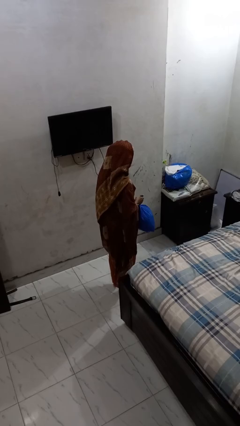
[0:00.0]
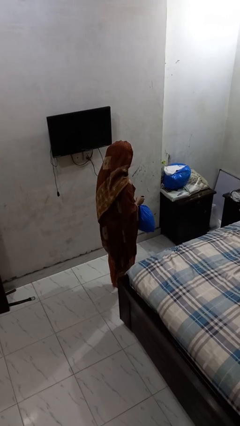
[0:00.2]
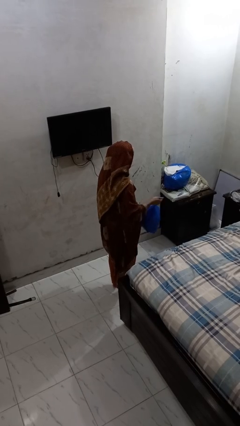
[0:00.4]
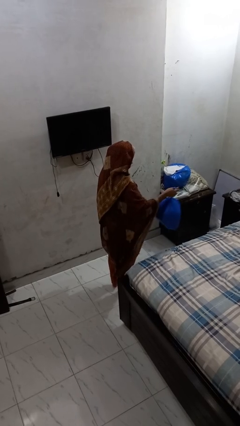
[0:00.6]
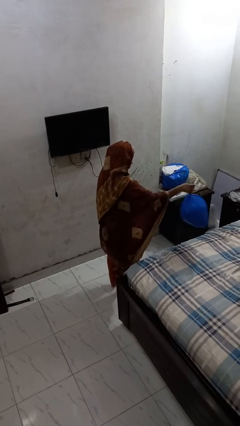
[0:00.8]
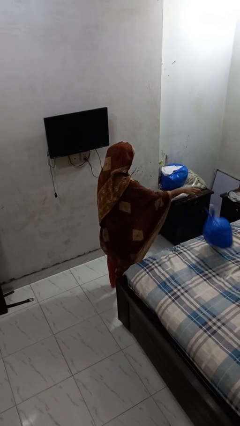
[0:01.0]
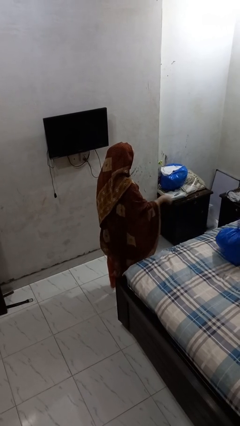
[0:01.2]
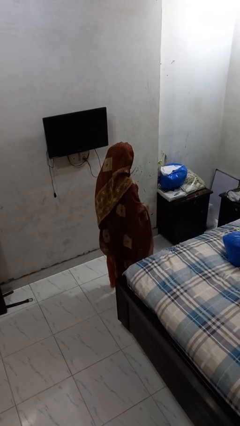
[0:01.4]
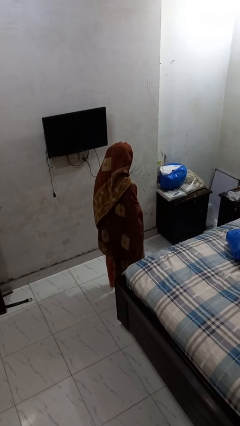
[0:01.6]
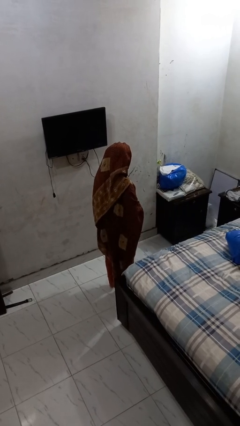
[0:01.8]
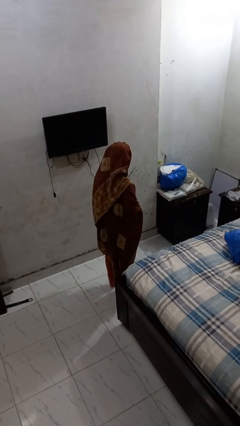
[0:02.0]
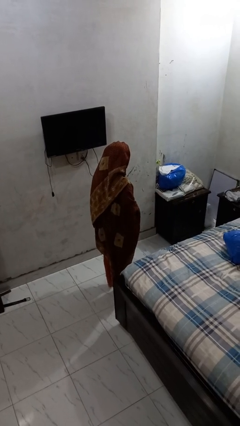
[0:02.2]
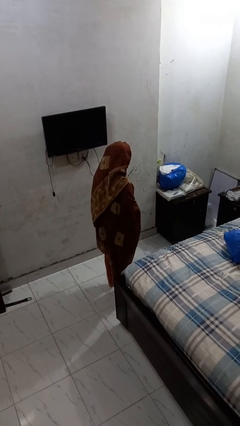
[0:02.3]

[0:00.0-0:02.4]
person throws object on bed

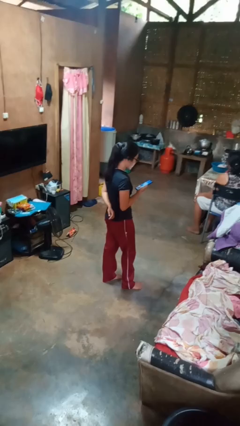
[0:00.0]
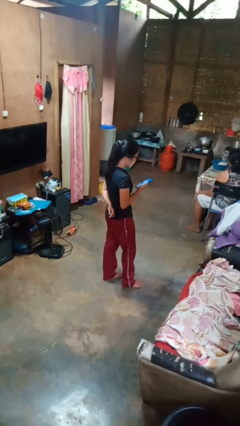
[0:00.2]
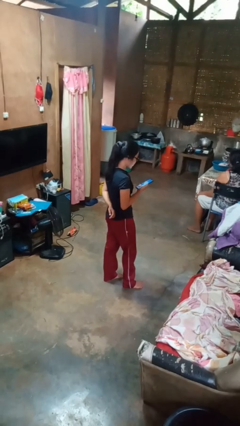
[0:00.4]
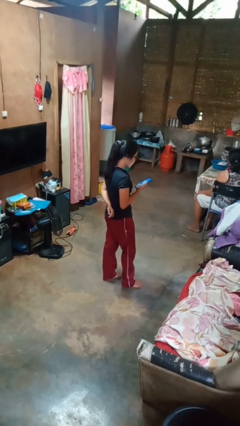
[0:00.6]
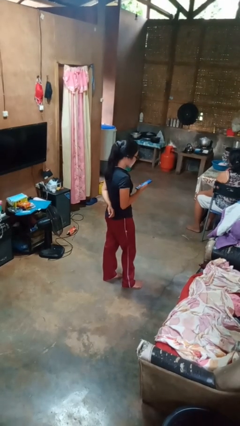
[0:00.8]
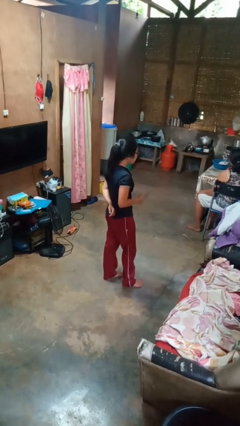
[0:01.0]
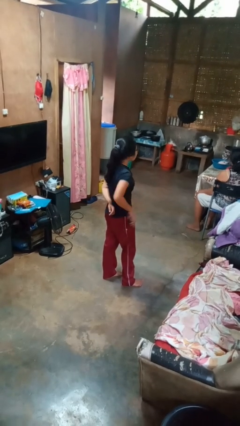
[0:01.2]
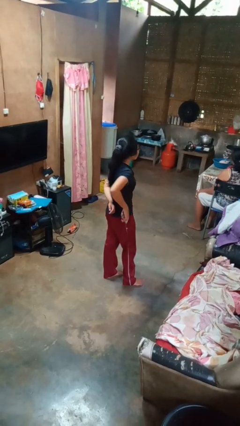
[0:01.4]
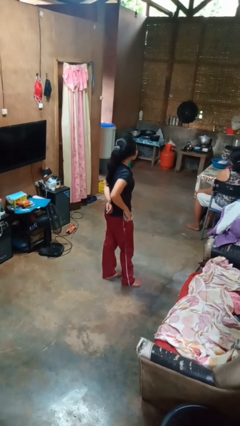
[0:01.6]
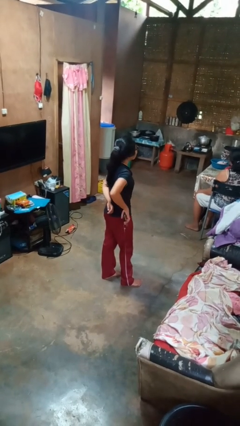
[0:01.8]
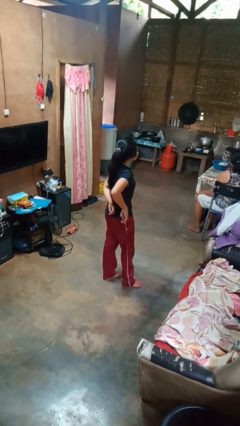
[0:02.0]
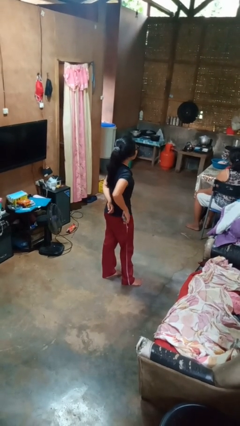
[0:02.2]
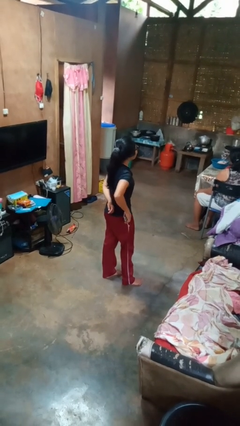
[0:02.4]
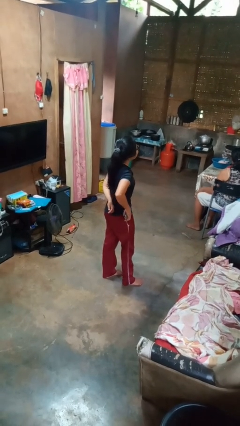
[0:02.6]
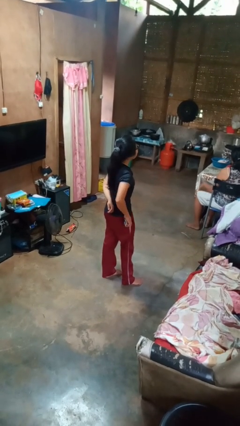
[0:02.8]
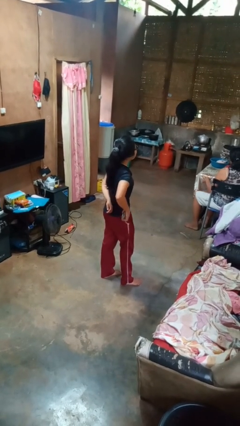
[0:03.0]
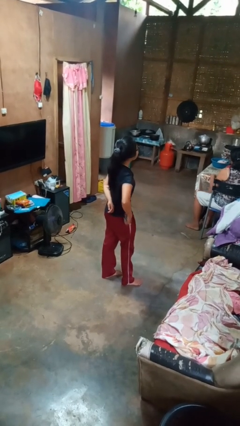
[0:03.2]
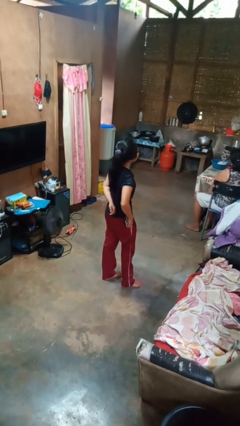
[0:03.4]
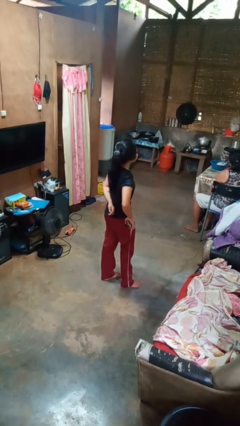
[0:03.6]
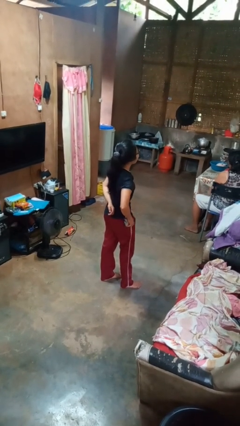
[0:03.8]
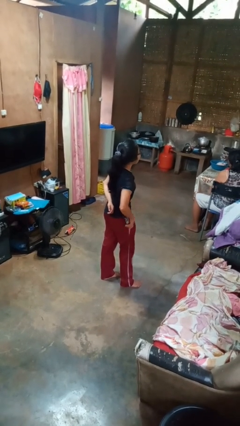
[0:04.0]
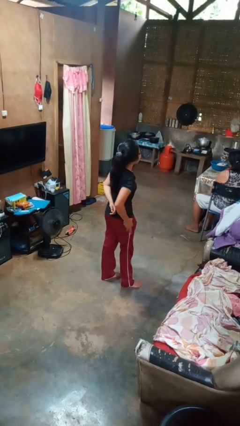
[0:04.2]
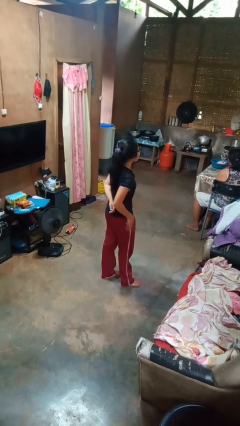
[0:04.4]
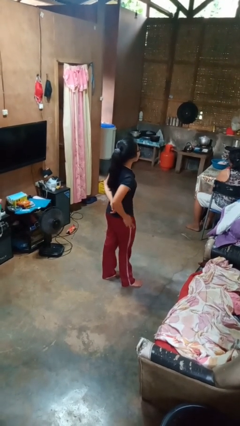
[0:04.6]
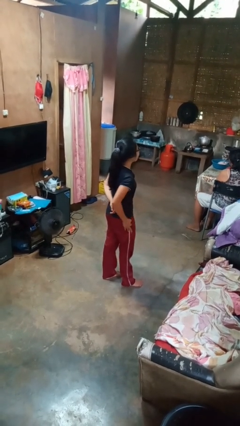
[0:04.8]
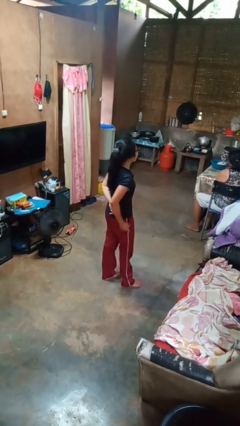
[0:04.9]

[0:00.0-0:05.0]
person puts phone into pocket

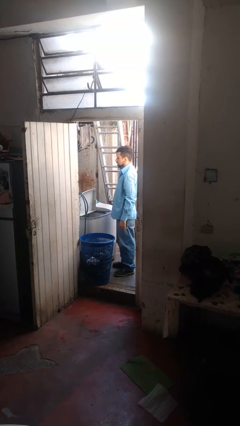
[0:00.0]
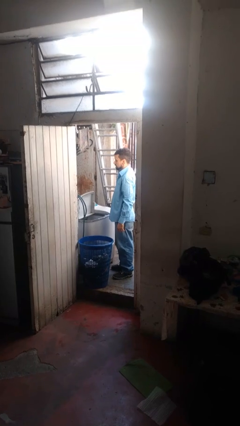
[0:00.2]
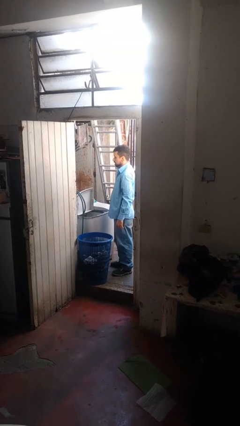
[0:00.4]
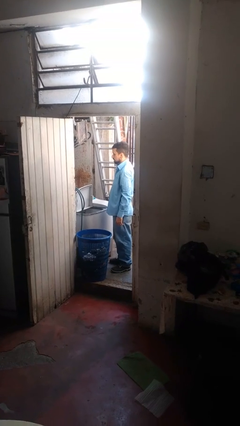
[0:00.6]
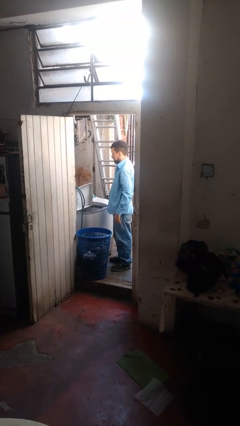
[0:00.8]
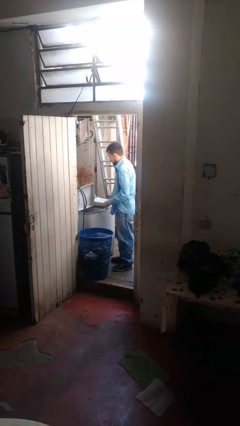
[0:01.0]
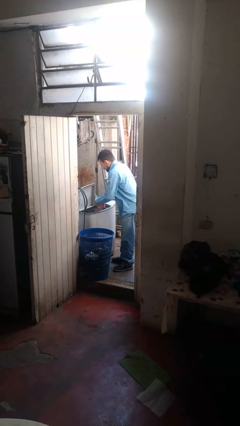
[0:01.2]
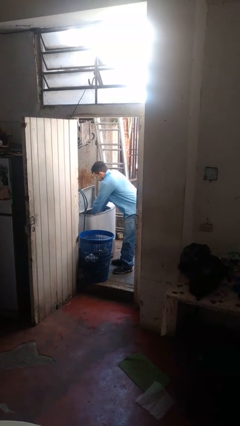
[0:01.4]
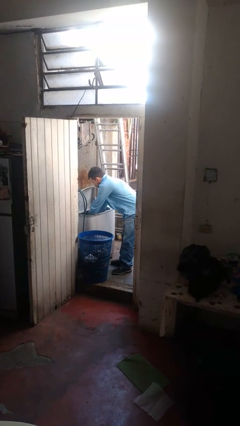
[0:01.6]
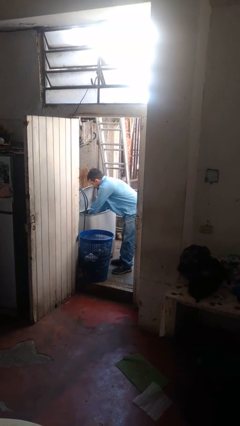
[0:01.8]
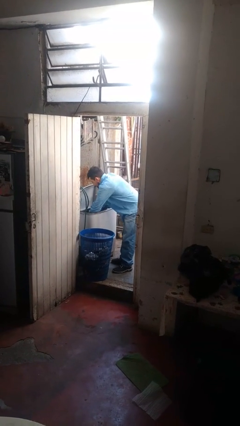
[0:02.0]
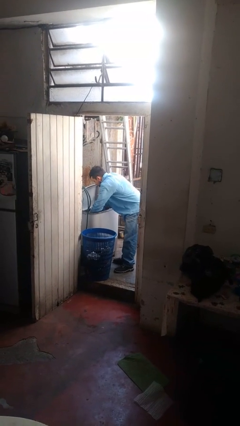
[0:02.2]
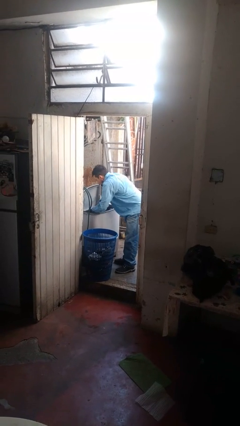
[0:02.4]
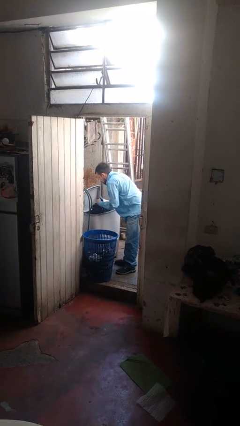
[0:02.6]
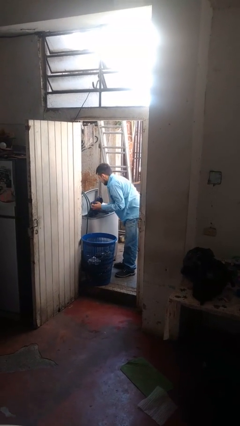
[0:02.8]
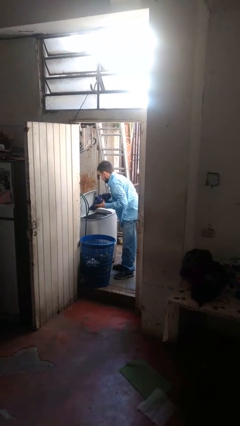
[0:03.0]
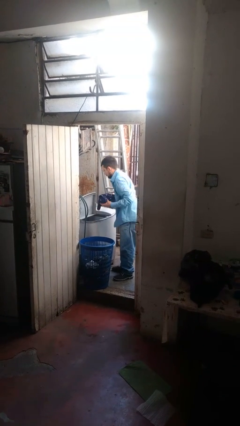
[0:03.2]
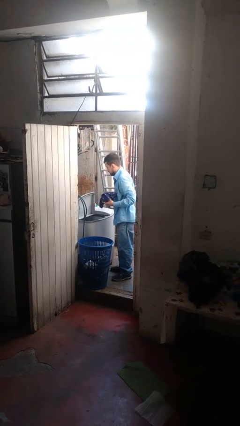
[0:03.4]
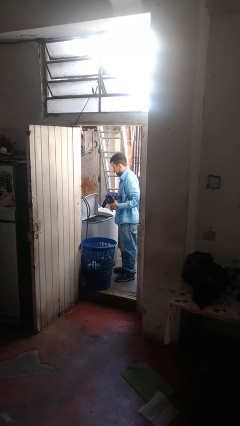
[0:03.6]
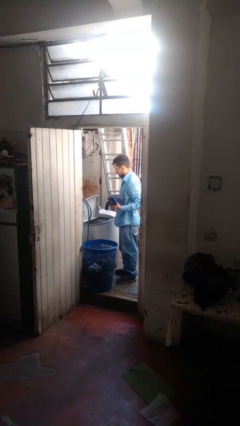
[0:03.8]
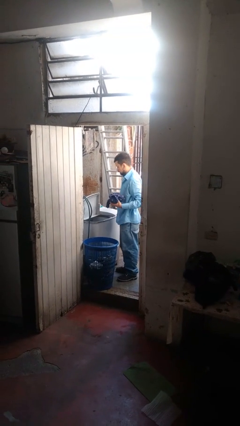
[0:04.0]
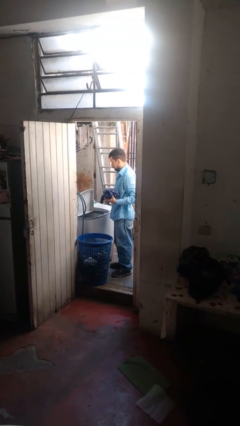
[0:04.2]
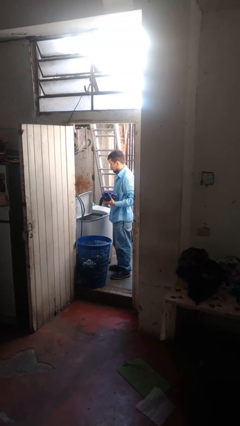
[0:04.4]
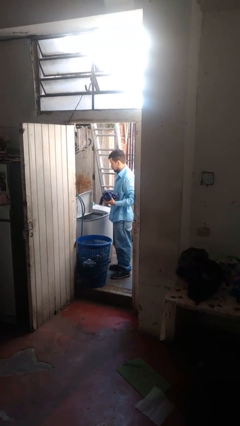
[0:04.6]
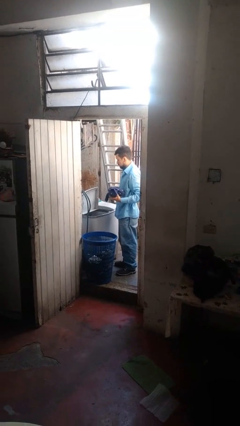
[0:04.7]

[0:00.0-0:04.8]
person unloads clotheswasher

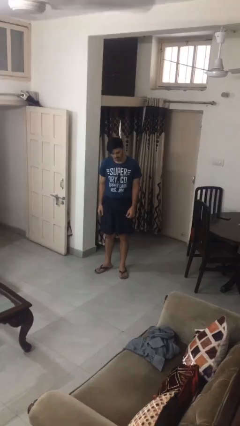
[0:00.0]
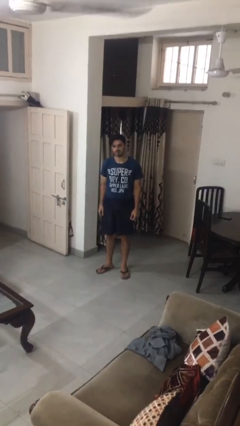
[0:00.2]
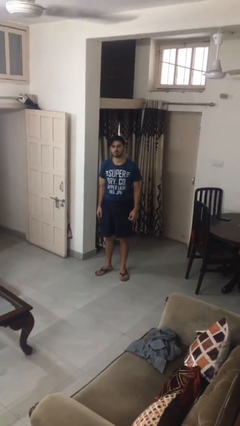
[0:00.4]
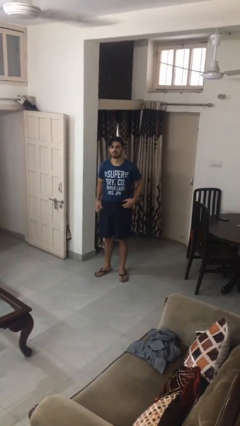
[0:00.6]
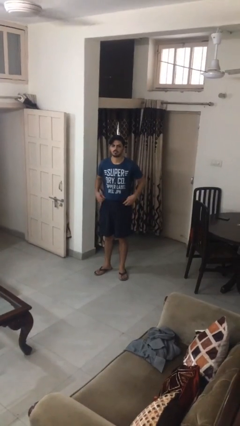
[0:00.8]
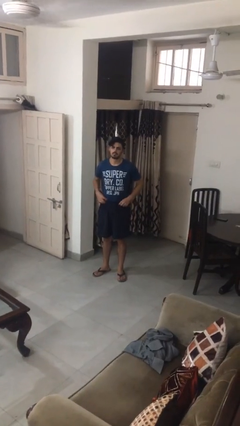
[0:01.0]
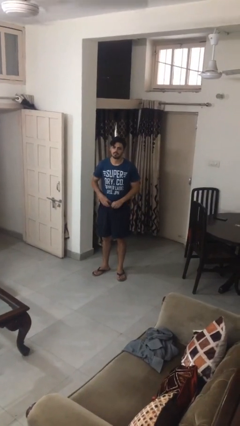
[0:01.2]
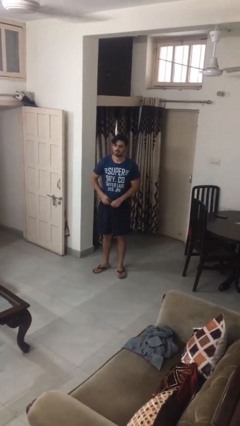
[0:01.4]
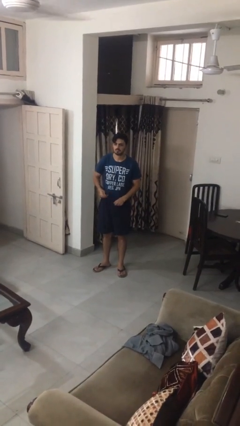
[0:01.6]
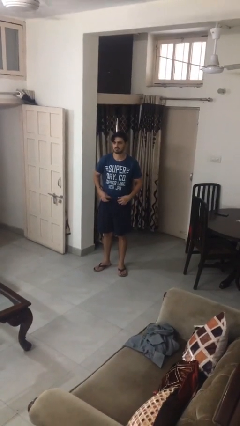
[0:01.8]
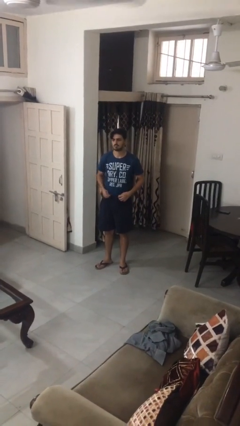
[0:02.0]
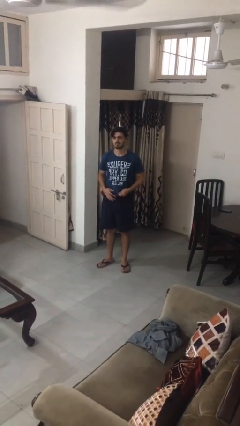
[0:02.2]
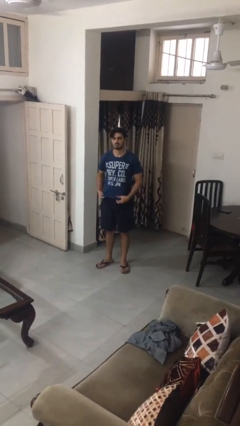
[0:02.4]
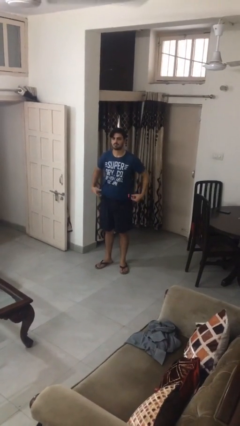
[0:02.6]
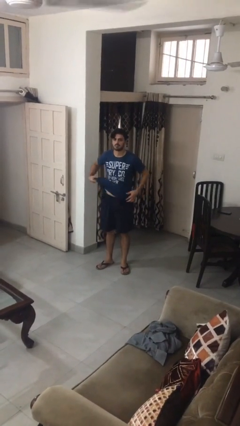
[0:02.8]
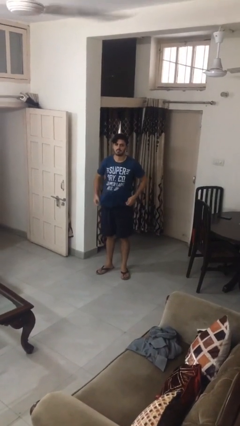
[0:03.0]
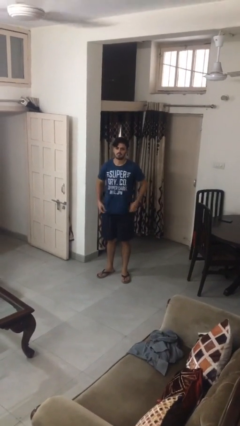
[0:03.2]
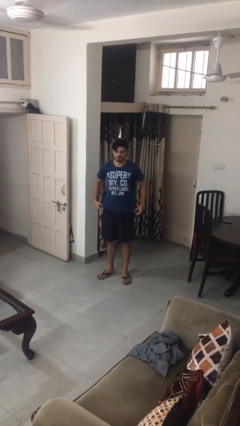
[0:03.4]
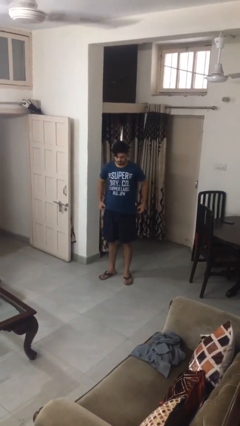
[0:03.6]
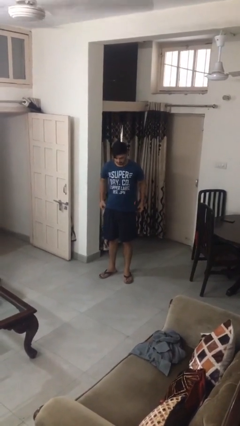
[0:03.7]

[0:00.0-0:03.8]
person untucks shirt

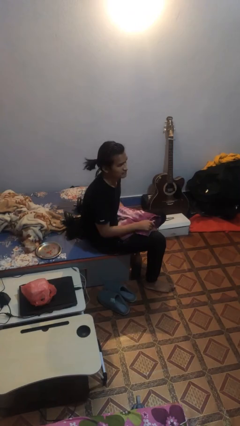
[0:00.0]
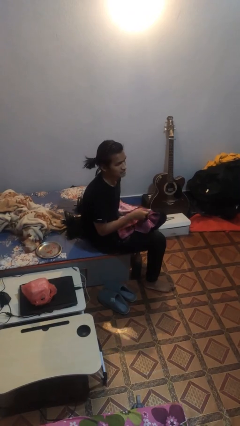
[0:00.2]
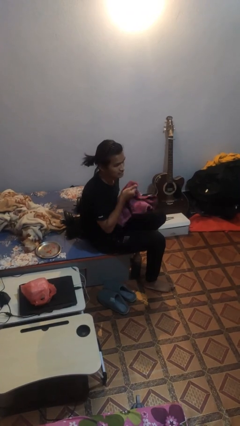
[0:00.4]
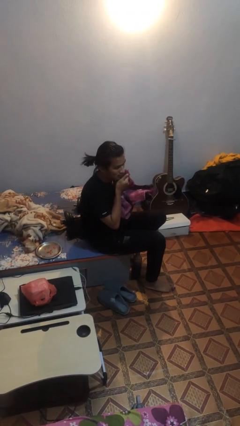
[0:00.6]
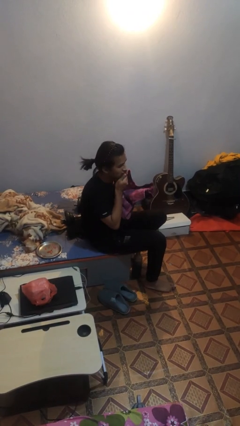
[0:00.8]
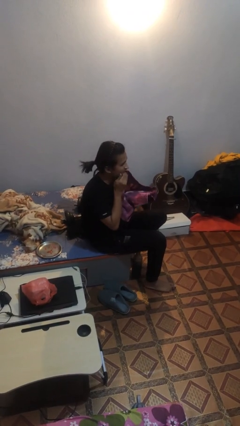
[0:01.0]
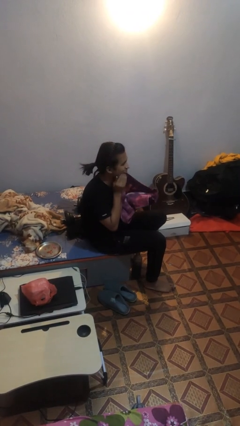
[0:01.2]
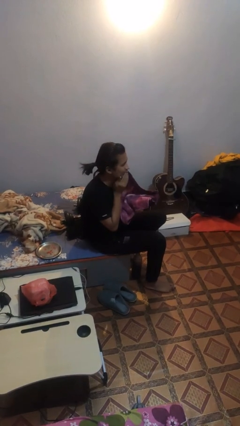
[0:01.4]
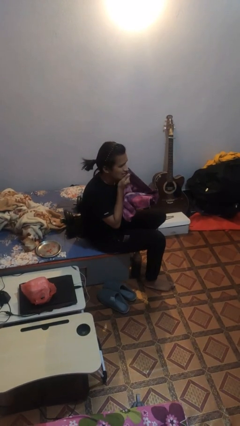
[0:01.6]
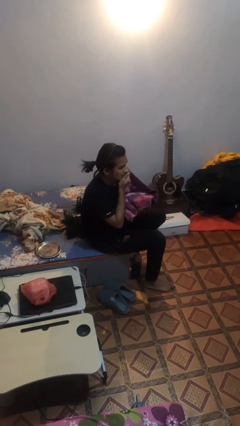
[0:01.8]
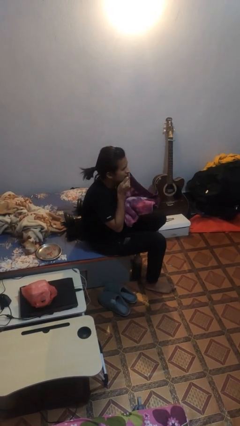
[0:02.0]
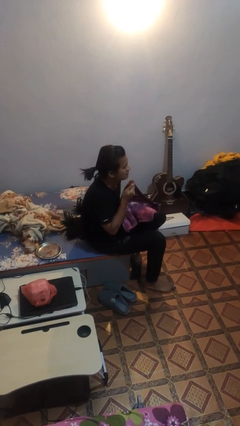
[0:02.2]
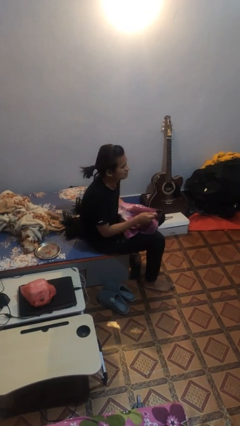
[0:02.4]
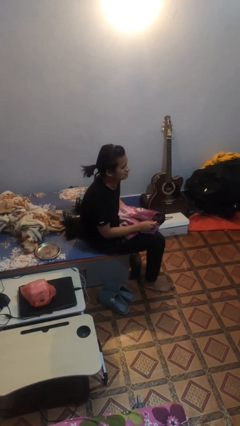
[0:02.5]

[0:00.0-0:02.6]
person wipes mouth with napkin
